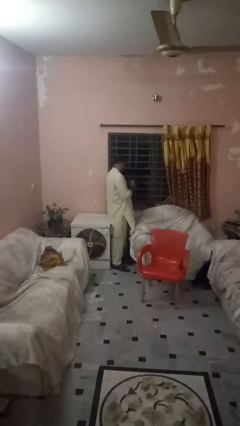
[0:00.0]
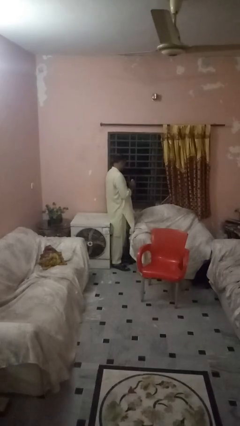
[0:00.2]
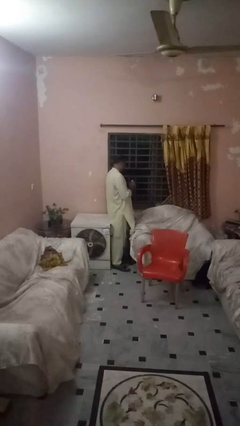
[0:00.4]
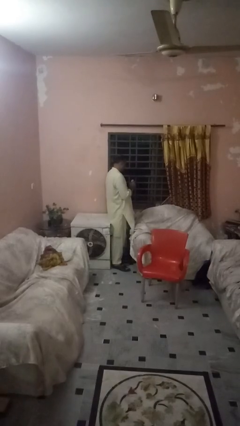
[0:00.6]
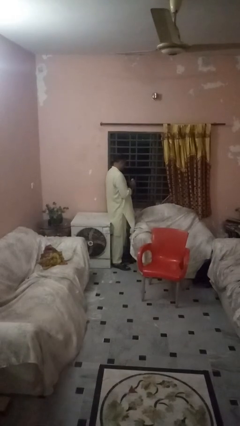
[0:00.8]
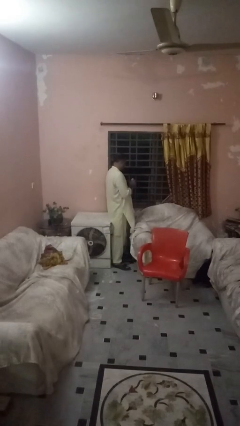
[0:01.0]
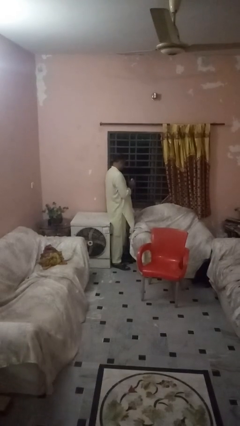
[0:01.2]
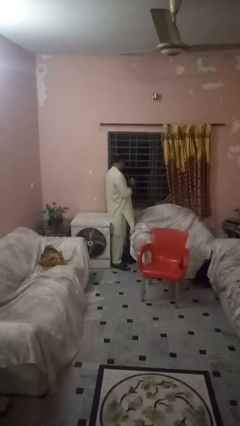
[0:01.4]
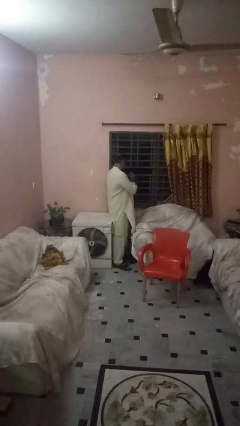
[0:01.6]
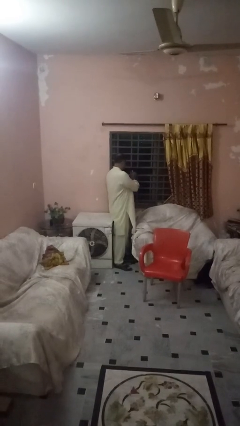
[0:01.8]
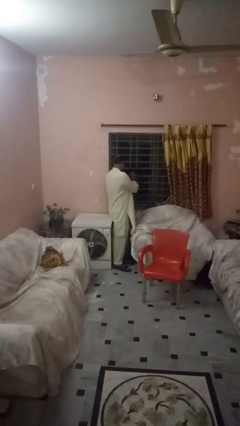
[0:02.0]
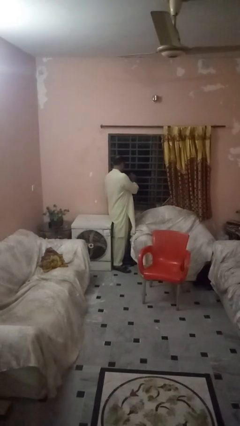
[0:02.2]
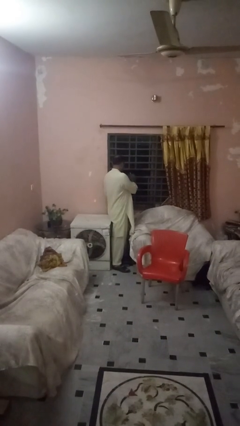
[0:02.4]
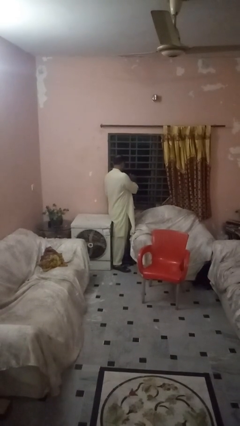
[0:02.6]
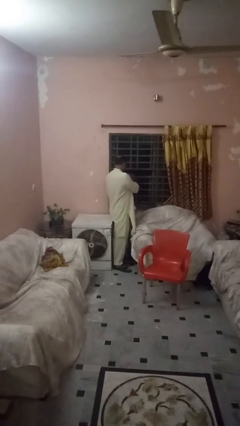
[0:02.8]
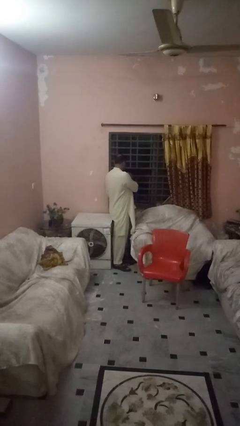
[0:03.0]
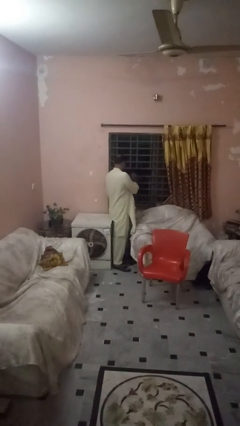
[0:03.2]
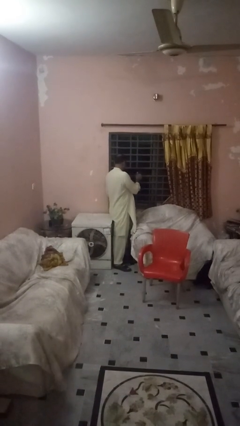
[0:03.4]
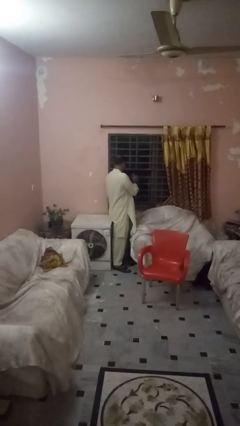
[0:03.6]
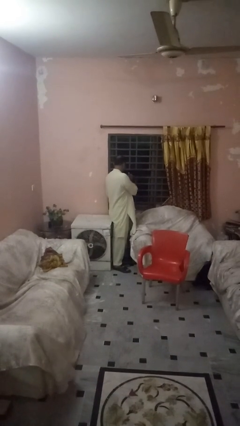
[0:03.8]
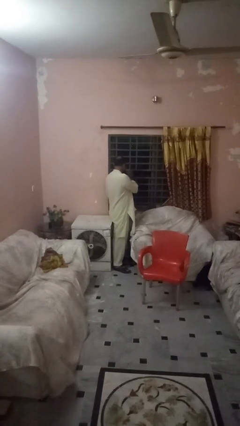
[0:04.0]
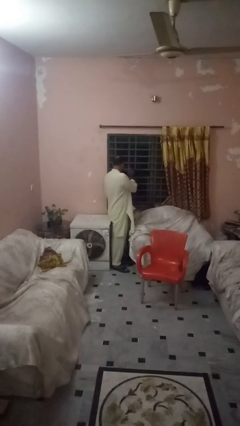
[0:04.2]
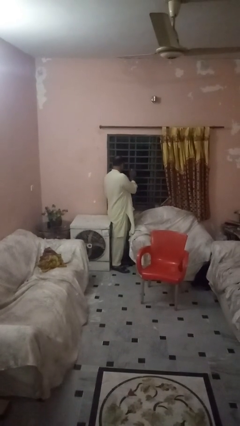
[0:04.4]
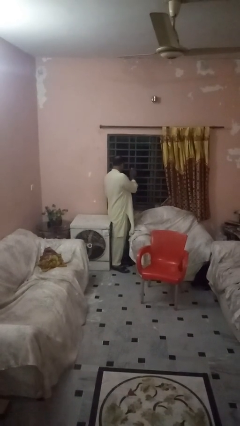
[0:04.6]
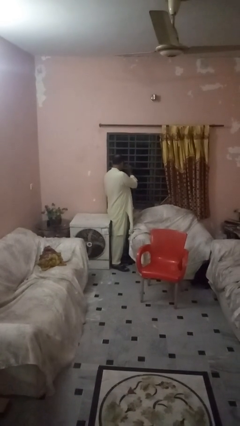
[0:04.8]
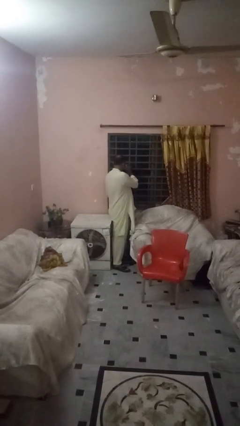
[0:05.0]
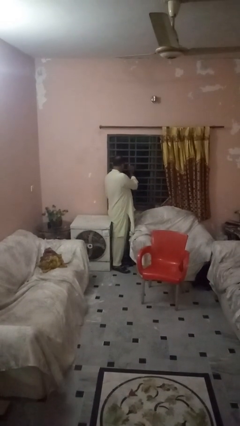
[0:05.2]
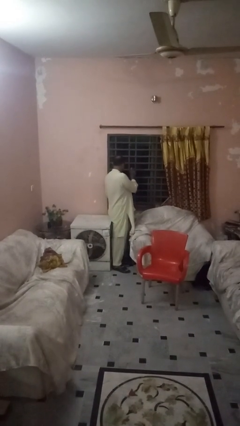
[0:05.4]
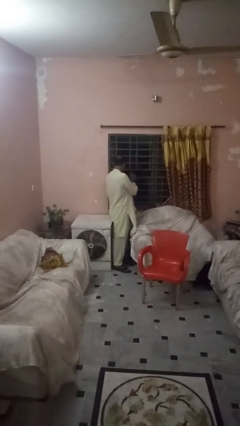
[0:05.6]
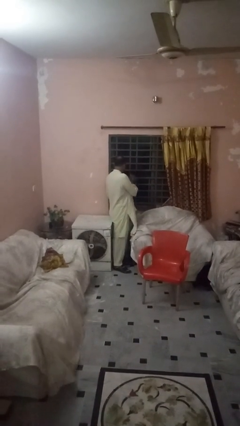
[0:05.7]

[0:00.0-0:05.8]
person sprays from bottle

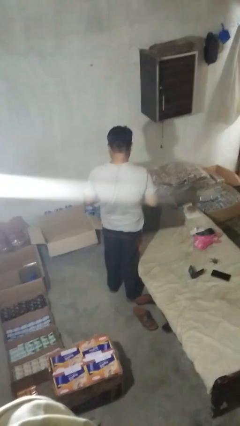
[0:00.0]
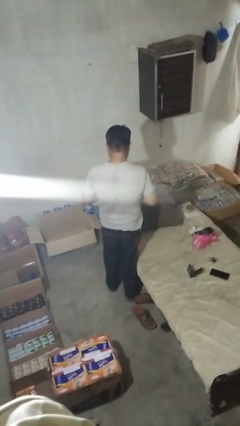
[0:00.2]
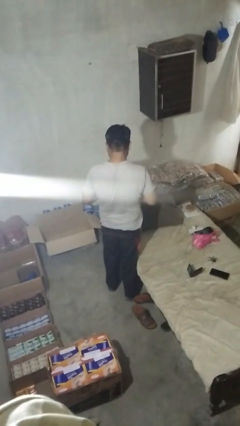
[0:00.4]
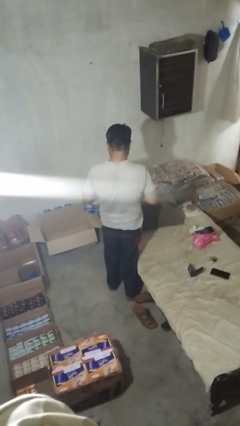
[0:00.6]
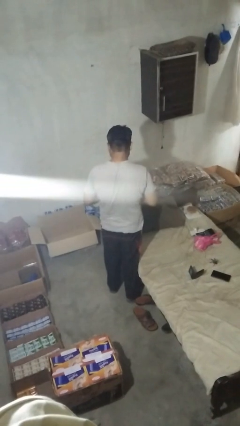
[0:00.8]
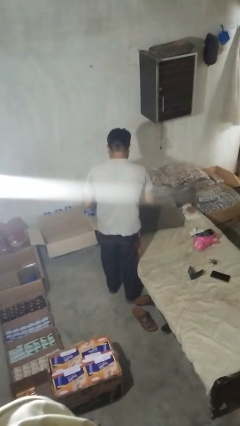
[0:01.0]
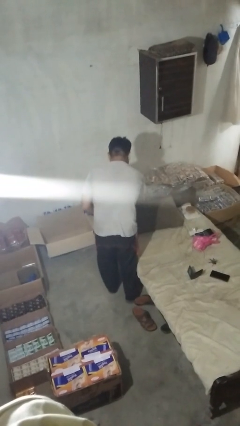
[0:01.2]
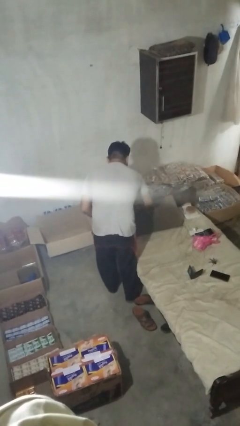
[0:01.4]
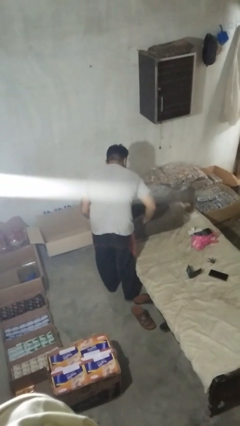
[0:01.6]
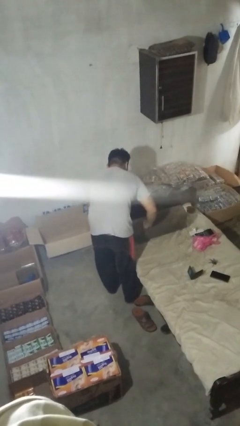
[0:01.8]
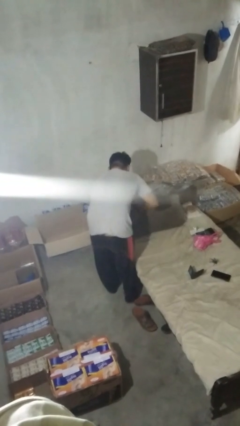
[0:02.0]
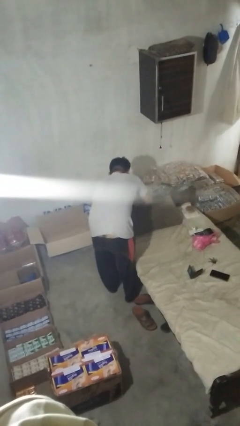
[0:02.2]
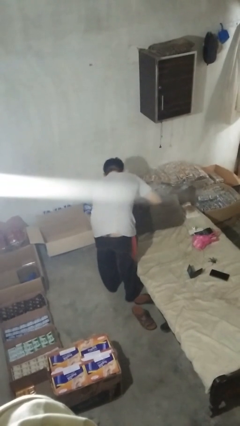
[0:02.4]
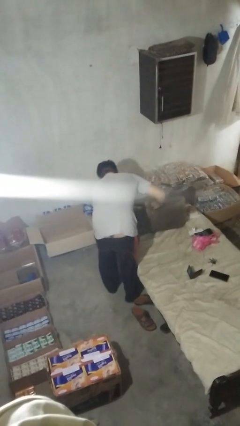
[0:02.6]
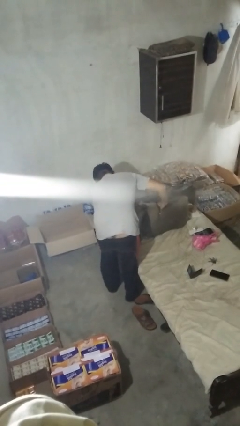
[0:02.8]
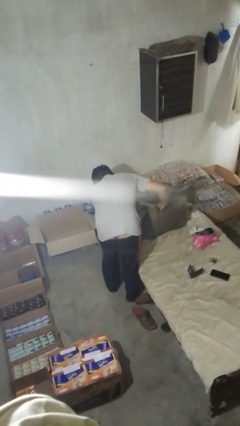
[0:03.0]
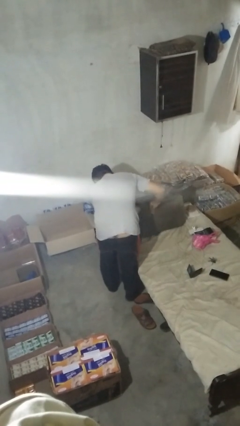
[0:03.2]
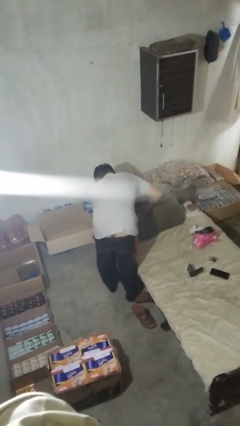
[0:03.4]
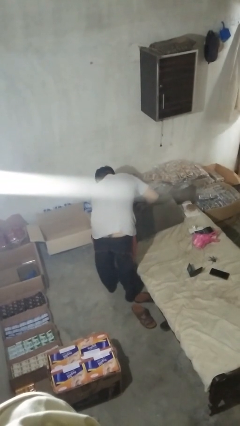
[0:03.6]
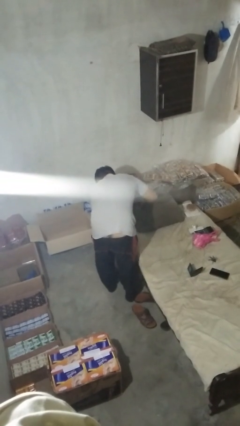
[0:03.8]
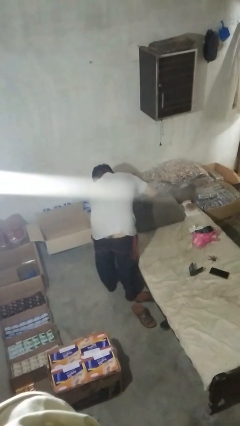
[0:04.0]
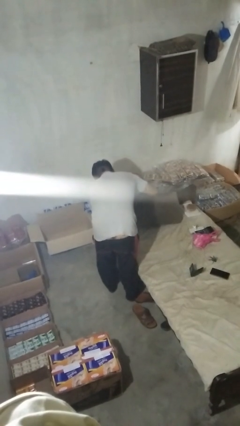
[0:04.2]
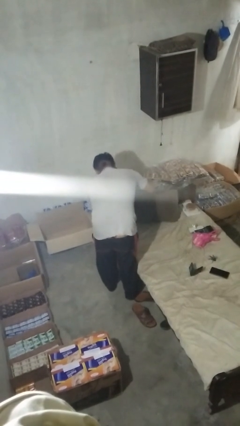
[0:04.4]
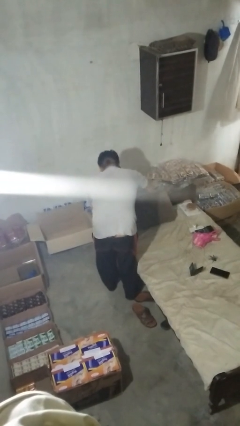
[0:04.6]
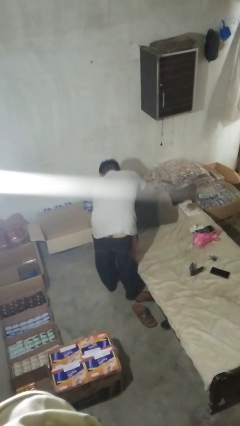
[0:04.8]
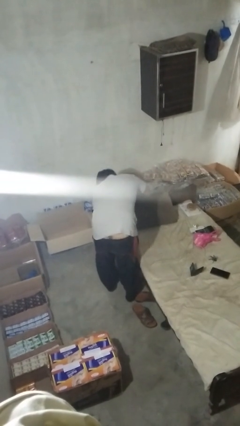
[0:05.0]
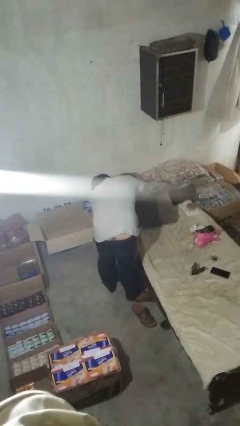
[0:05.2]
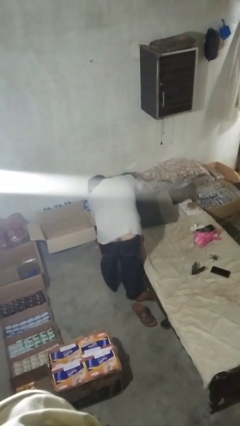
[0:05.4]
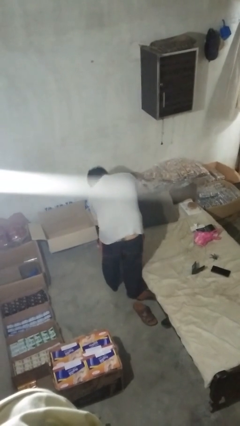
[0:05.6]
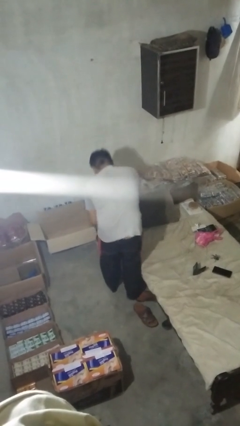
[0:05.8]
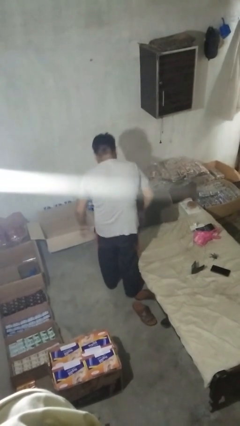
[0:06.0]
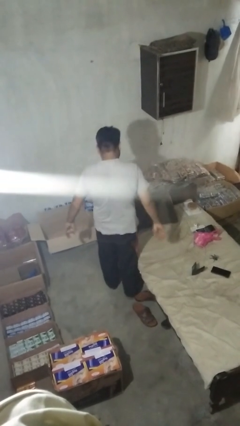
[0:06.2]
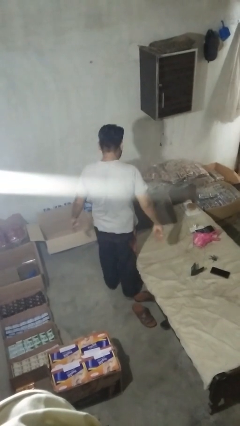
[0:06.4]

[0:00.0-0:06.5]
person searches in couch

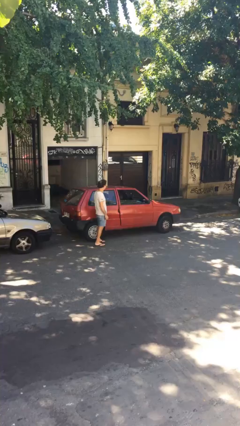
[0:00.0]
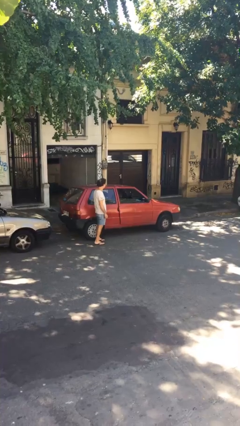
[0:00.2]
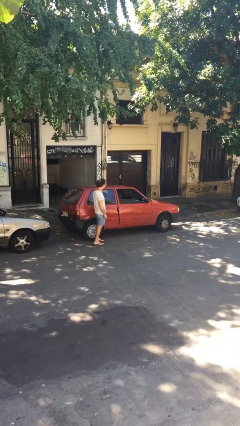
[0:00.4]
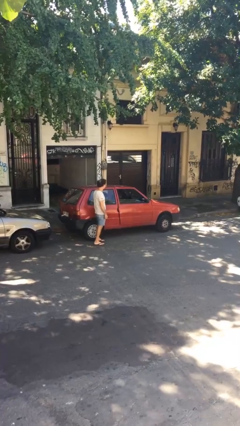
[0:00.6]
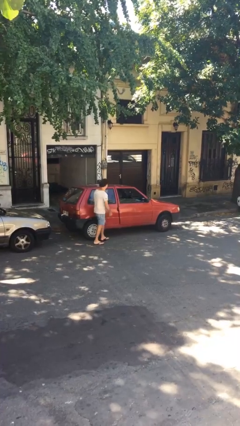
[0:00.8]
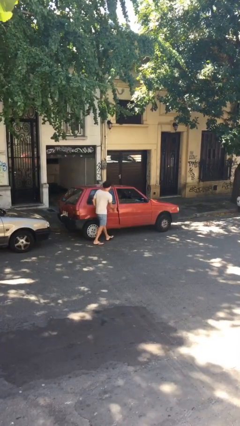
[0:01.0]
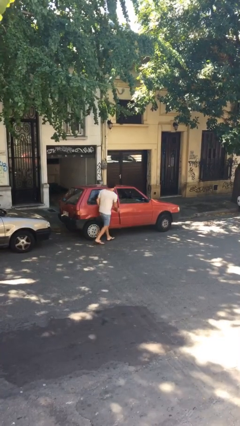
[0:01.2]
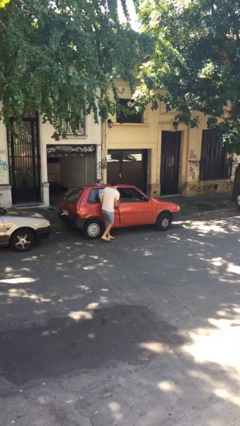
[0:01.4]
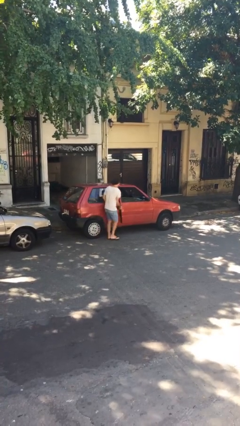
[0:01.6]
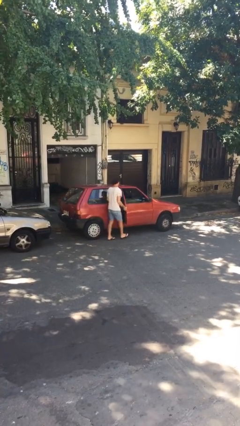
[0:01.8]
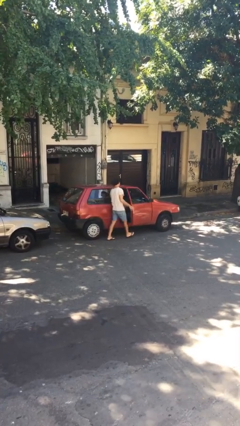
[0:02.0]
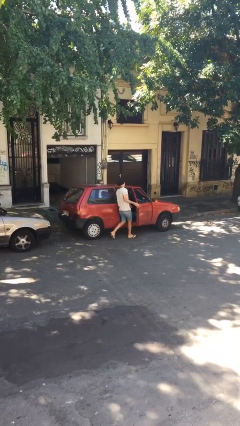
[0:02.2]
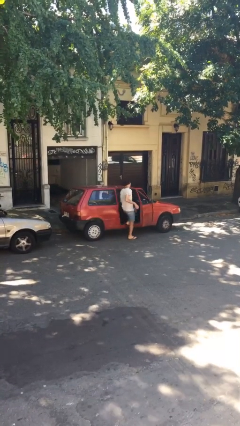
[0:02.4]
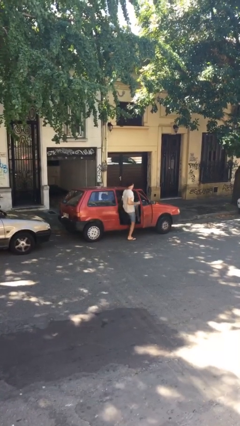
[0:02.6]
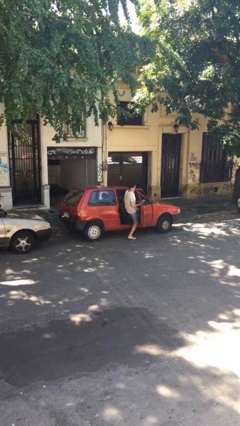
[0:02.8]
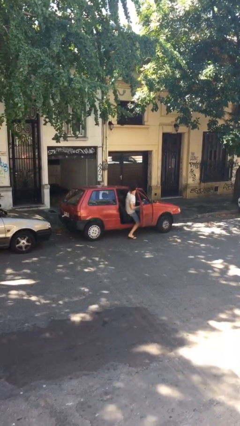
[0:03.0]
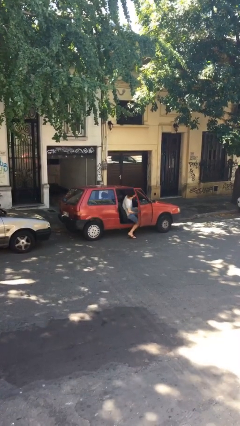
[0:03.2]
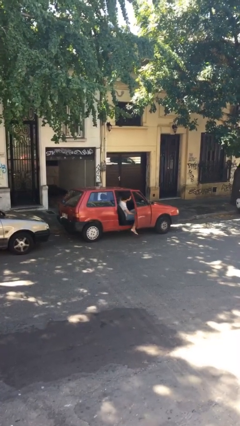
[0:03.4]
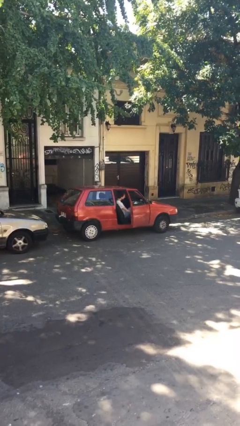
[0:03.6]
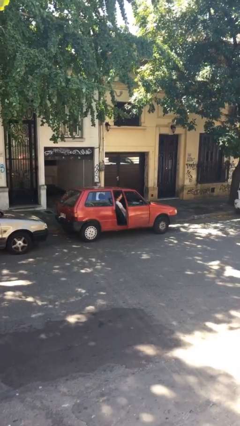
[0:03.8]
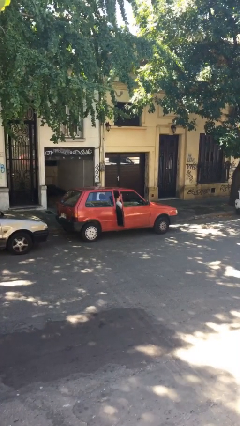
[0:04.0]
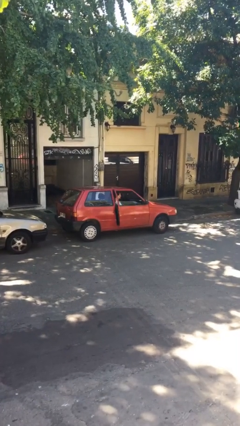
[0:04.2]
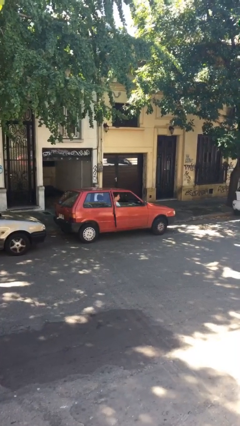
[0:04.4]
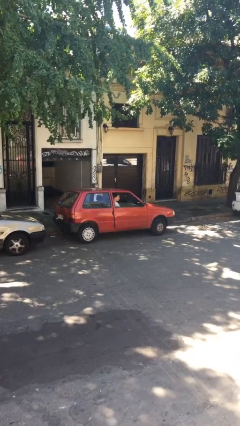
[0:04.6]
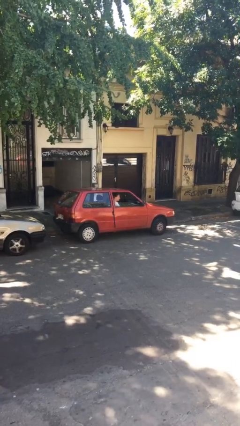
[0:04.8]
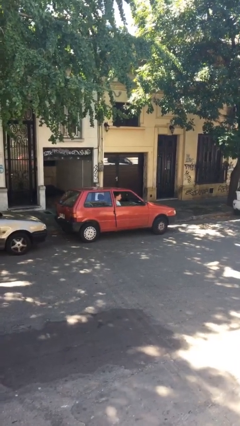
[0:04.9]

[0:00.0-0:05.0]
car picks up person

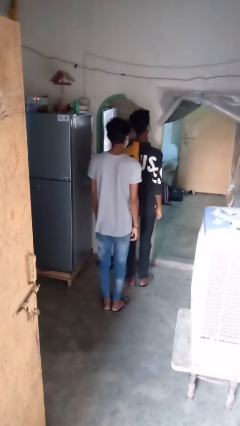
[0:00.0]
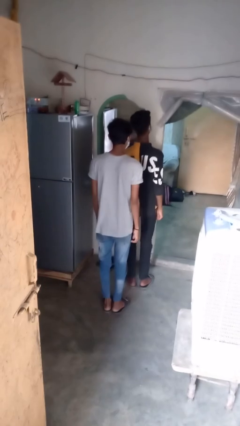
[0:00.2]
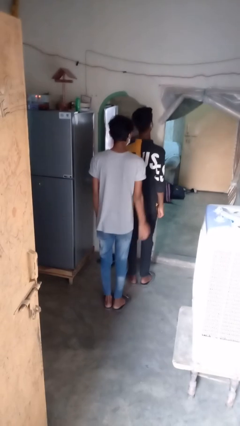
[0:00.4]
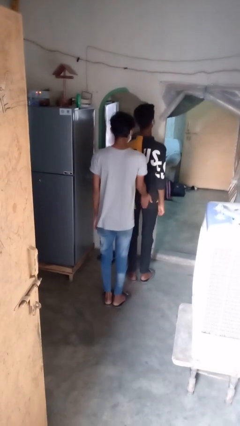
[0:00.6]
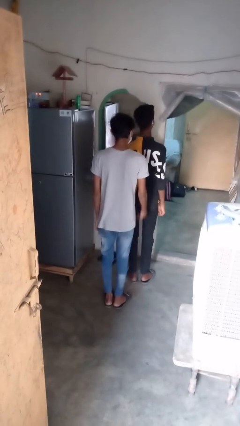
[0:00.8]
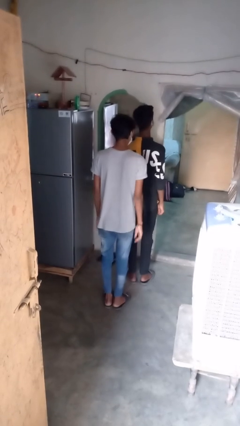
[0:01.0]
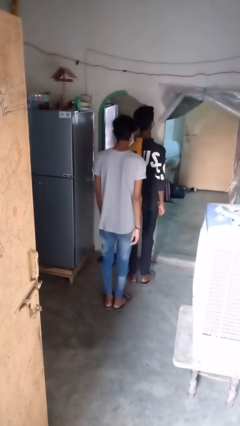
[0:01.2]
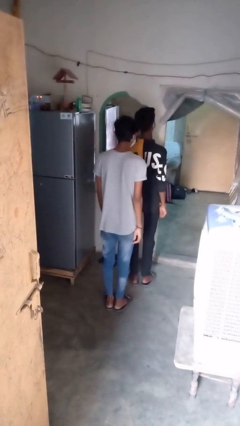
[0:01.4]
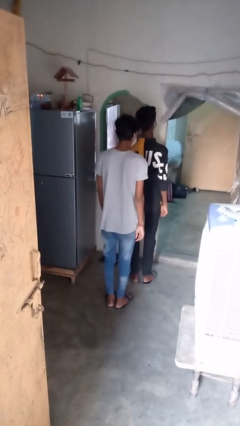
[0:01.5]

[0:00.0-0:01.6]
person bumps into person
